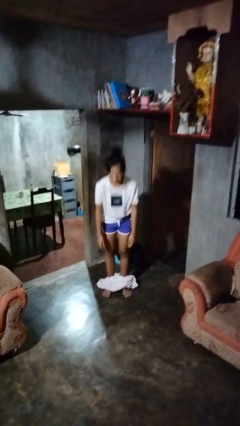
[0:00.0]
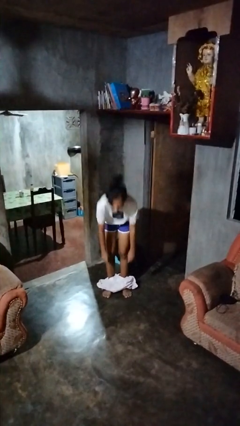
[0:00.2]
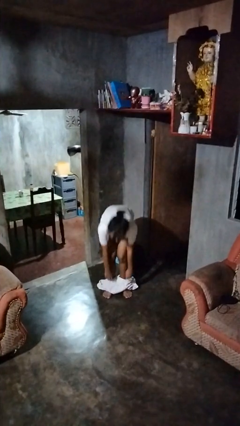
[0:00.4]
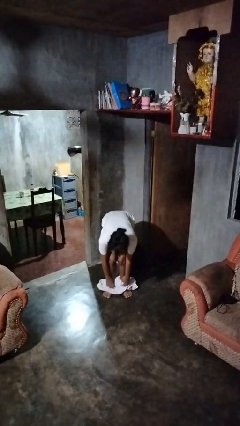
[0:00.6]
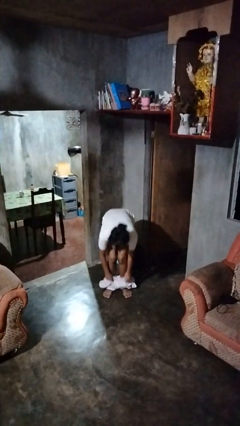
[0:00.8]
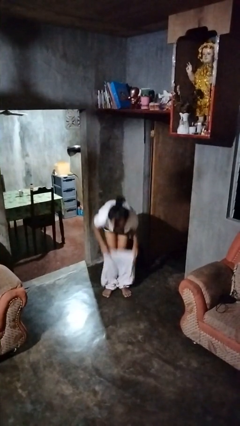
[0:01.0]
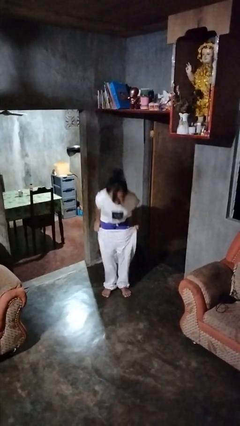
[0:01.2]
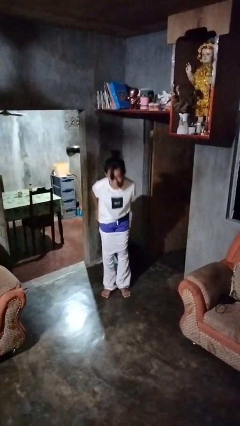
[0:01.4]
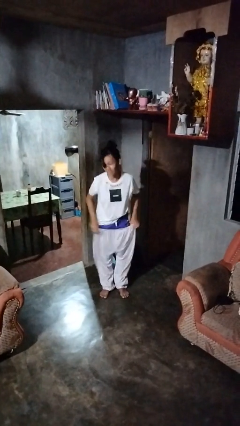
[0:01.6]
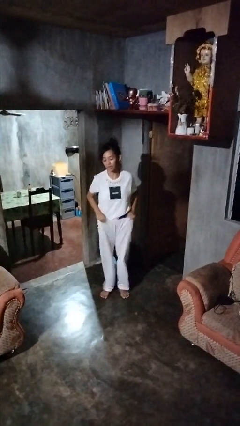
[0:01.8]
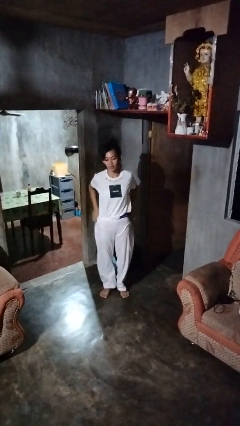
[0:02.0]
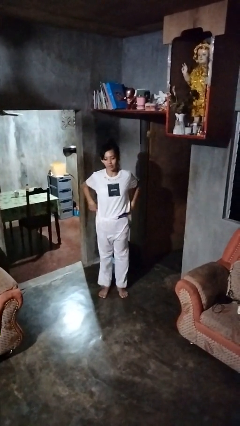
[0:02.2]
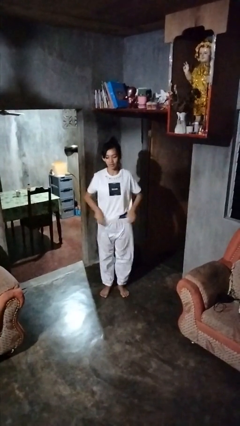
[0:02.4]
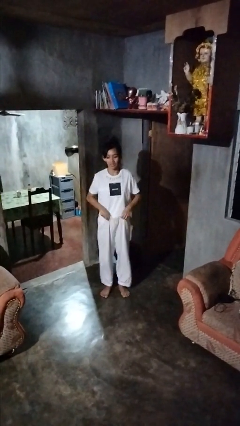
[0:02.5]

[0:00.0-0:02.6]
person puts on pants

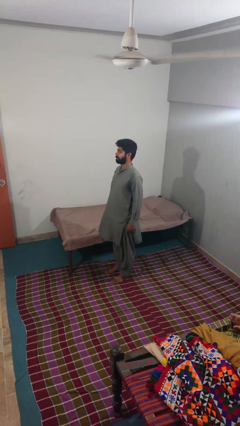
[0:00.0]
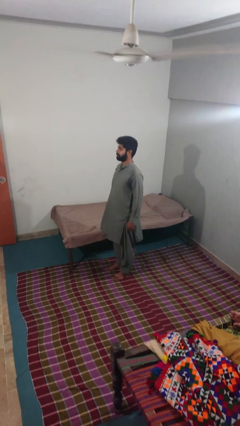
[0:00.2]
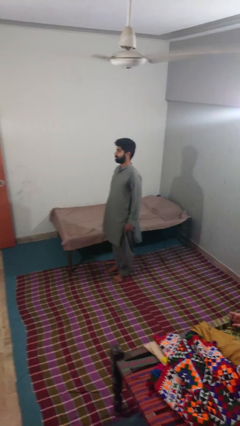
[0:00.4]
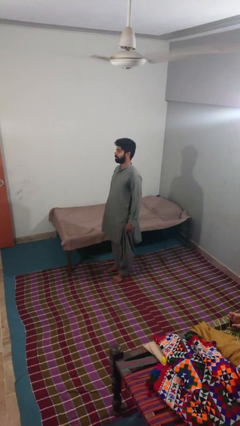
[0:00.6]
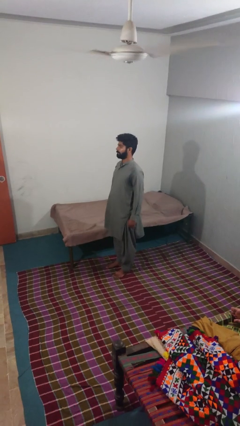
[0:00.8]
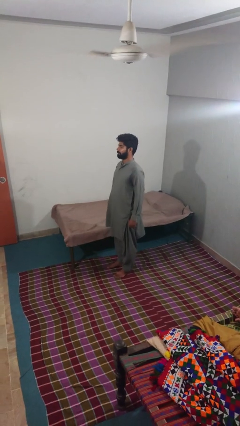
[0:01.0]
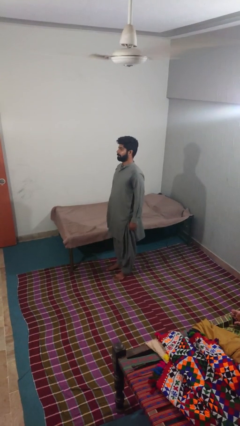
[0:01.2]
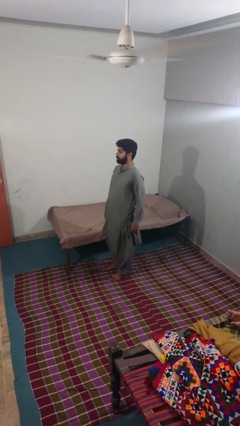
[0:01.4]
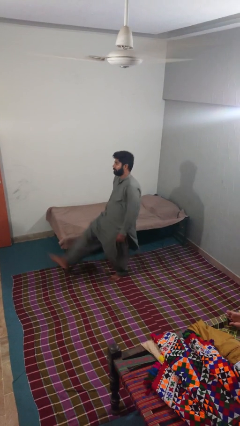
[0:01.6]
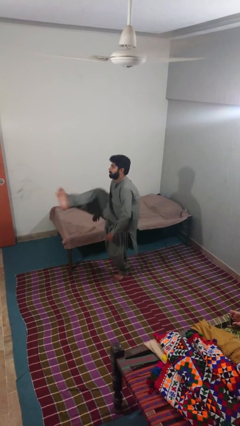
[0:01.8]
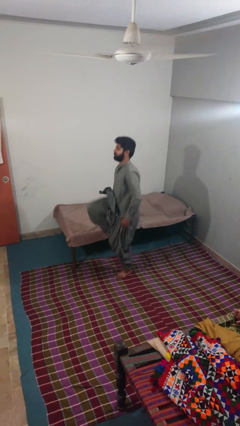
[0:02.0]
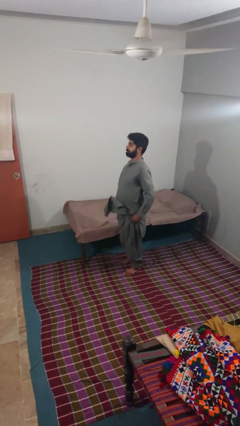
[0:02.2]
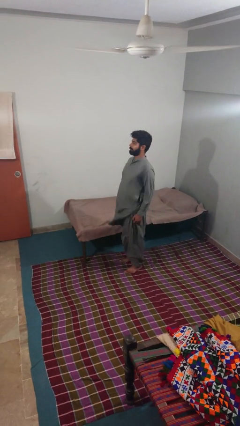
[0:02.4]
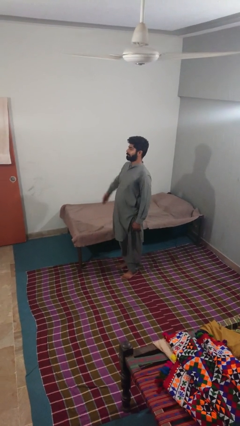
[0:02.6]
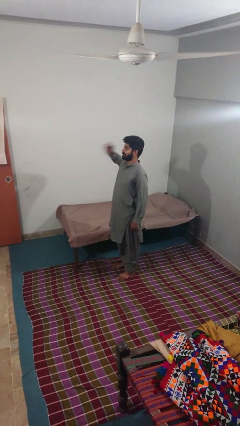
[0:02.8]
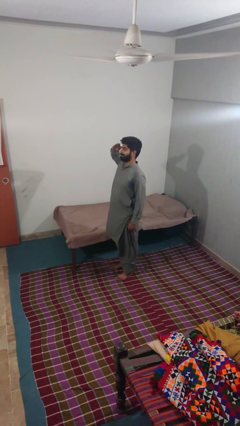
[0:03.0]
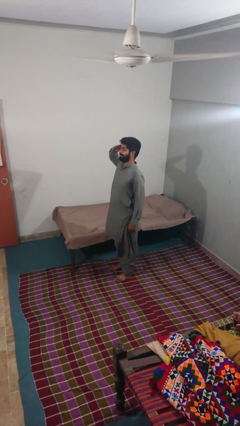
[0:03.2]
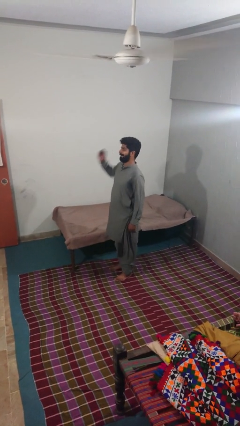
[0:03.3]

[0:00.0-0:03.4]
person salutes

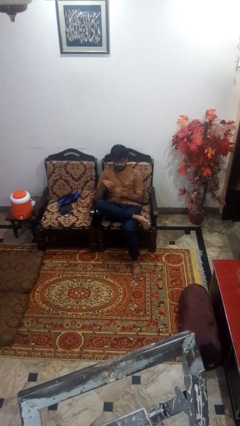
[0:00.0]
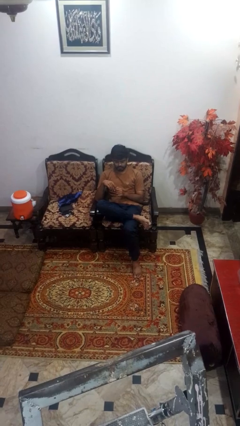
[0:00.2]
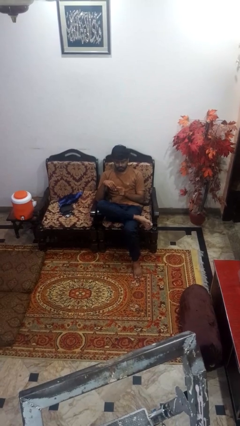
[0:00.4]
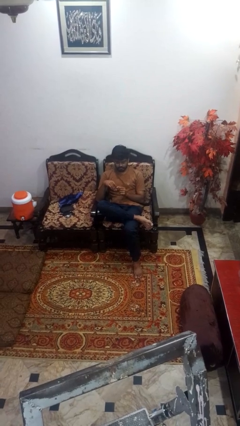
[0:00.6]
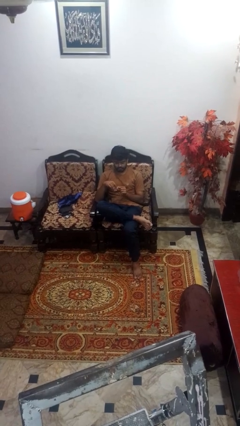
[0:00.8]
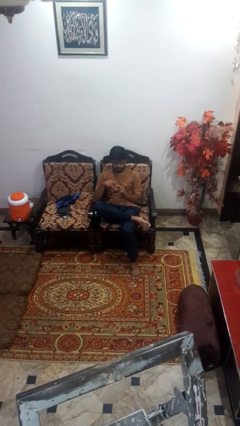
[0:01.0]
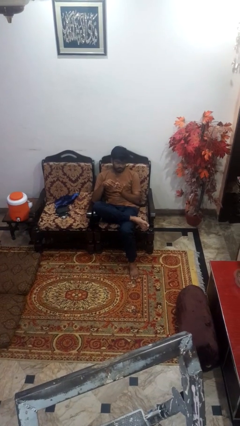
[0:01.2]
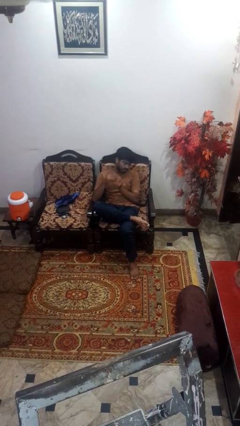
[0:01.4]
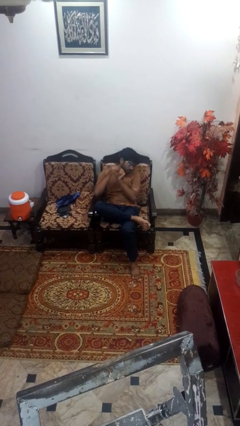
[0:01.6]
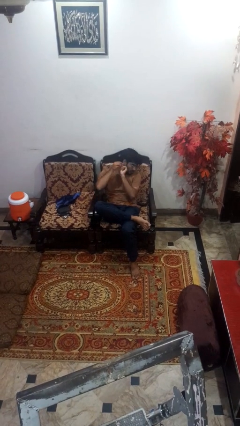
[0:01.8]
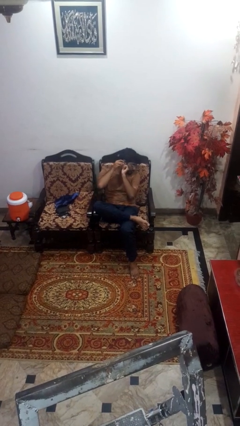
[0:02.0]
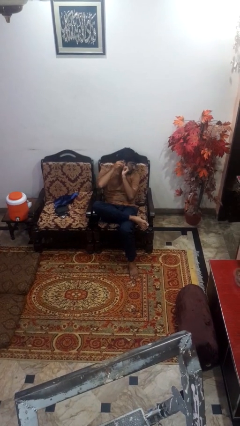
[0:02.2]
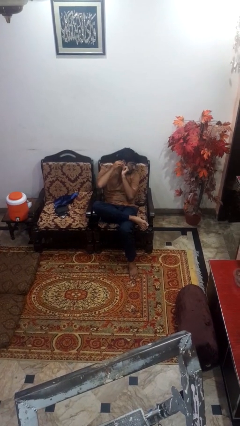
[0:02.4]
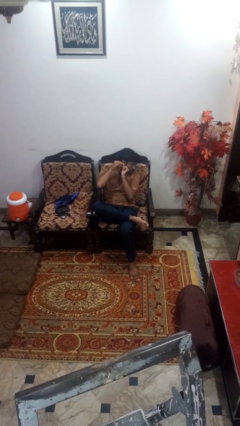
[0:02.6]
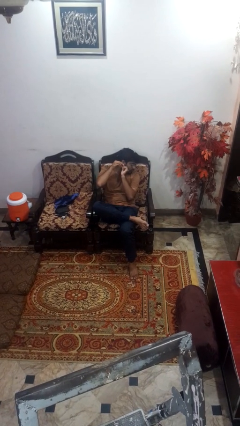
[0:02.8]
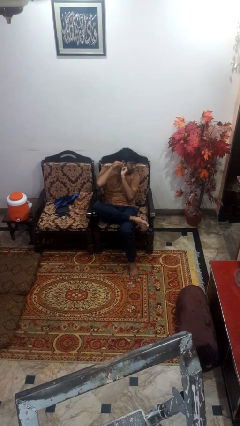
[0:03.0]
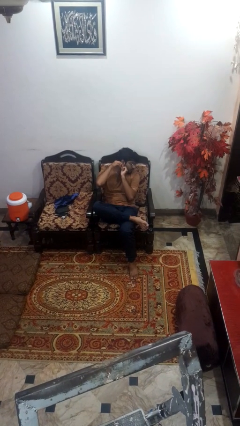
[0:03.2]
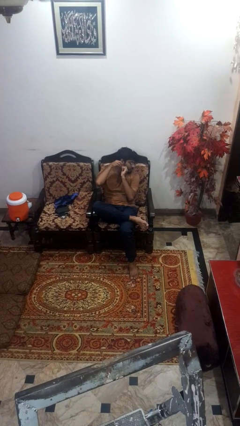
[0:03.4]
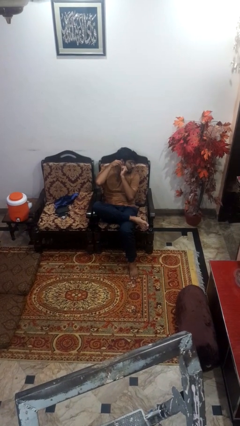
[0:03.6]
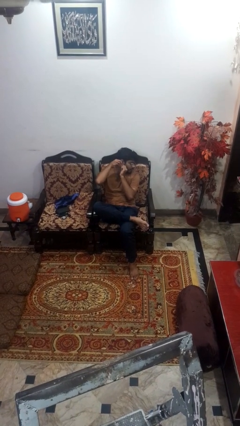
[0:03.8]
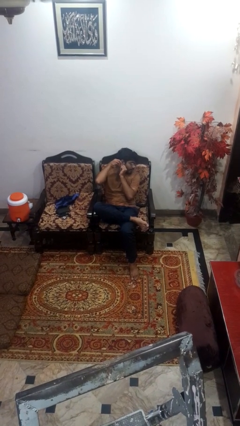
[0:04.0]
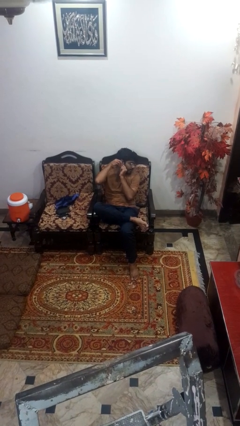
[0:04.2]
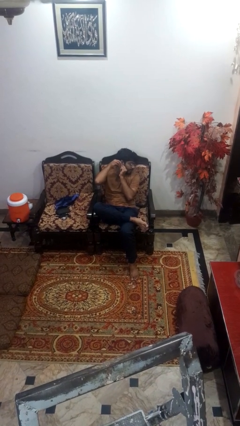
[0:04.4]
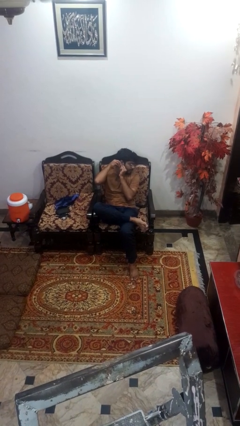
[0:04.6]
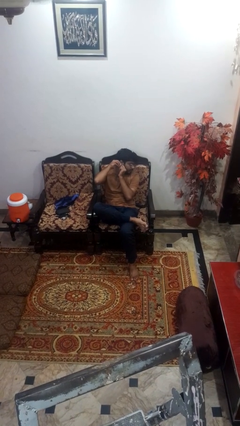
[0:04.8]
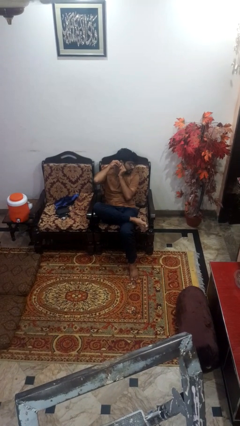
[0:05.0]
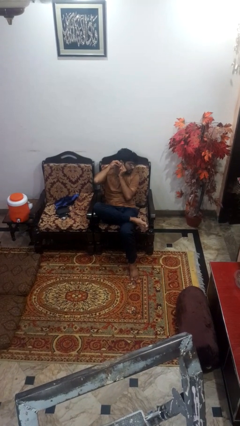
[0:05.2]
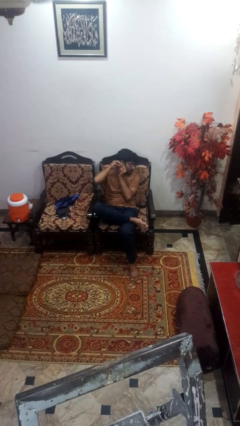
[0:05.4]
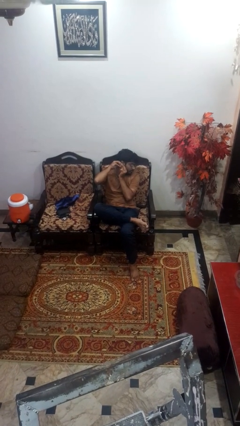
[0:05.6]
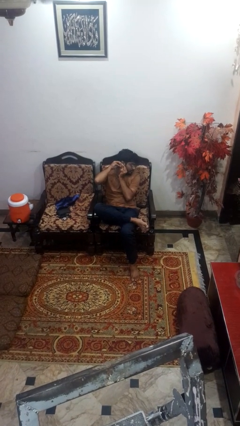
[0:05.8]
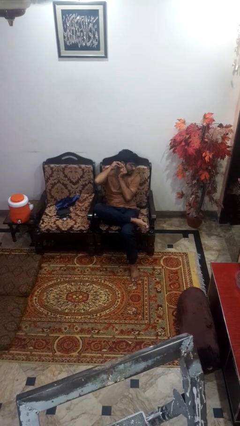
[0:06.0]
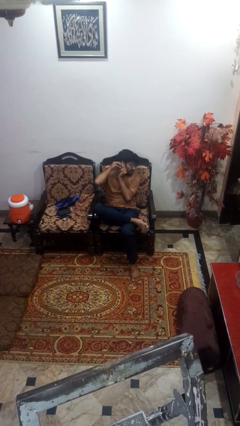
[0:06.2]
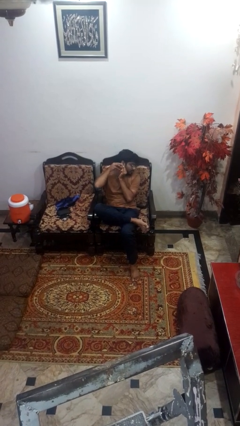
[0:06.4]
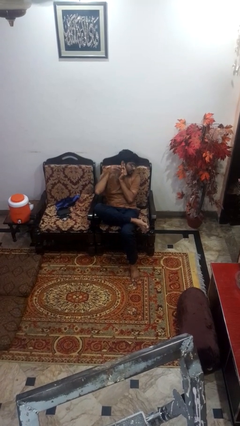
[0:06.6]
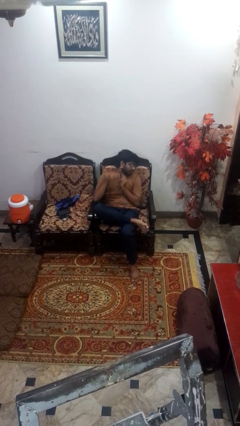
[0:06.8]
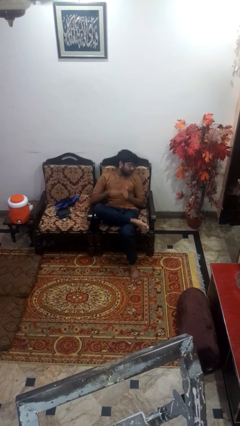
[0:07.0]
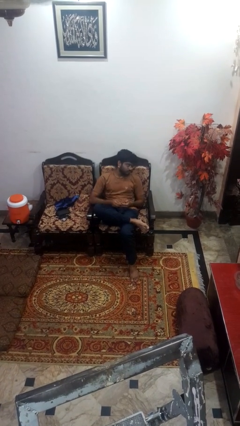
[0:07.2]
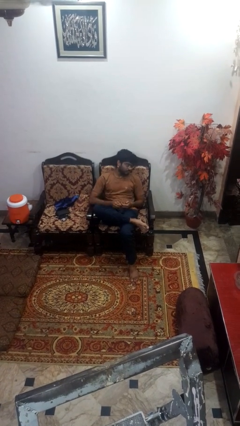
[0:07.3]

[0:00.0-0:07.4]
person puts on earrings

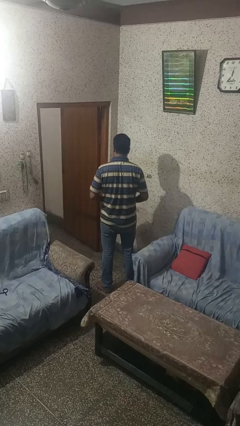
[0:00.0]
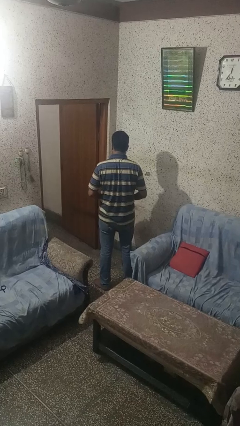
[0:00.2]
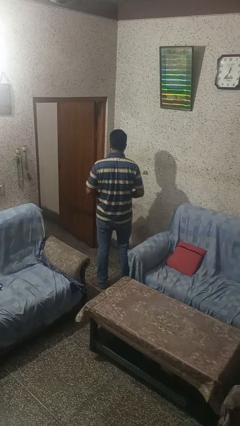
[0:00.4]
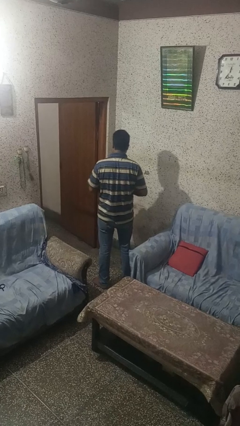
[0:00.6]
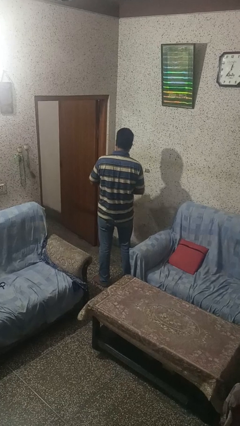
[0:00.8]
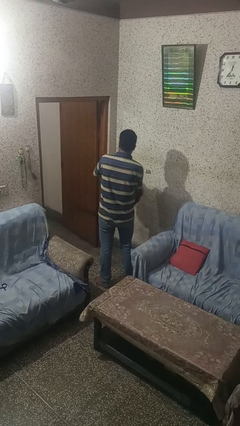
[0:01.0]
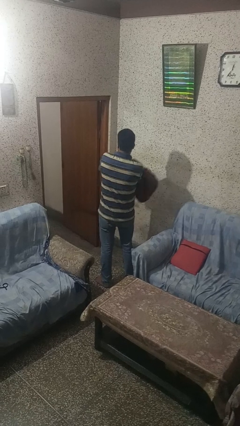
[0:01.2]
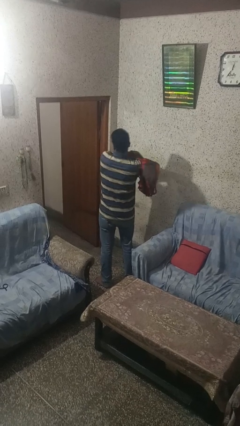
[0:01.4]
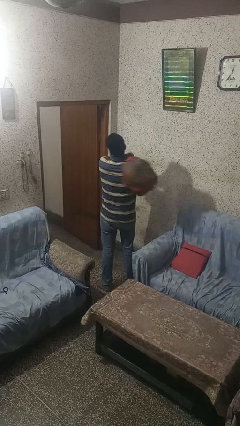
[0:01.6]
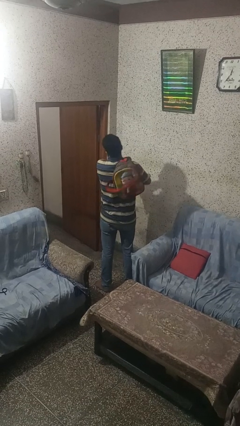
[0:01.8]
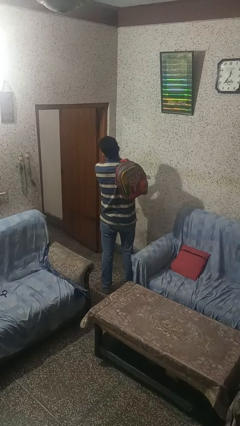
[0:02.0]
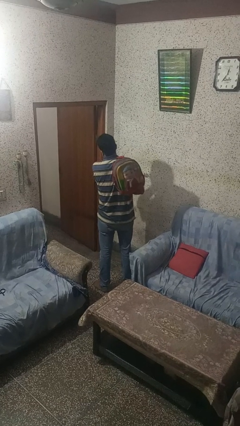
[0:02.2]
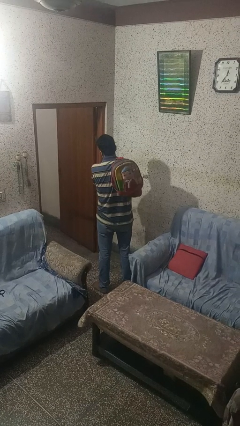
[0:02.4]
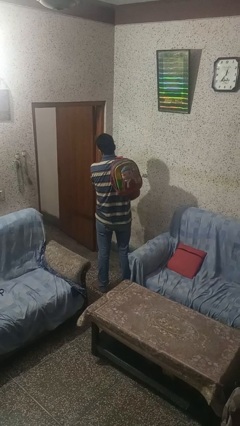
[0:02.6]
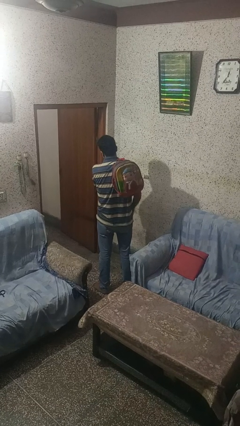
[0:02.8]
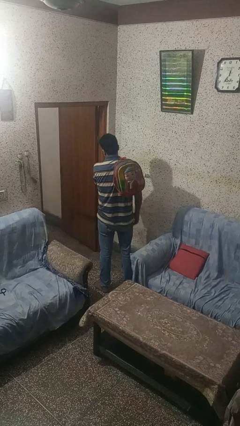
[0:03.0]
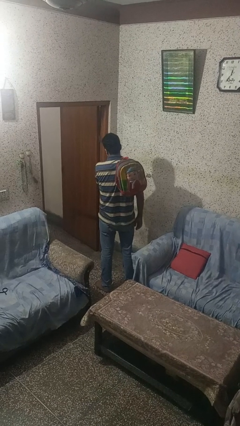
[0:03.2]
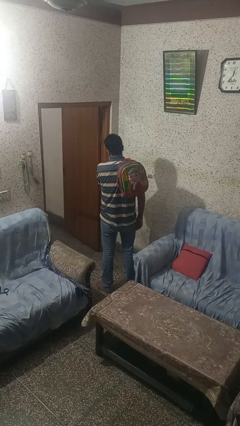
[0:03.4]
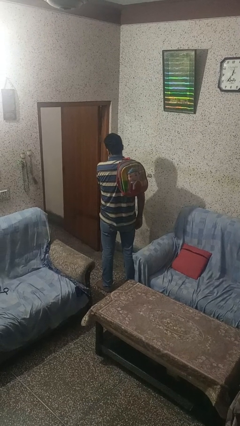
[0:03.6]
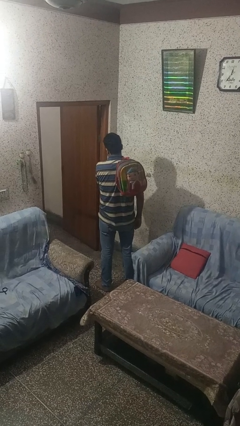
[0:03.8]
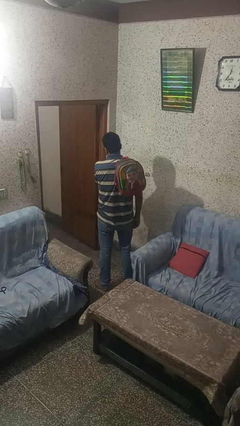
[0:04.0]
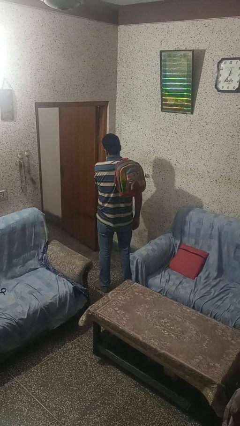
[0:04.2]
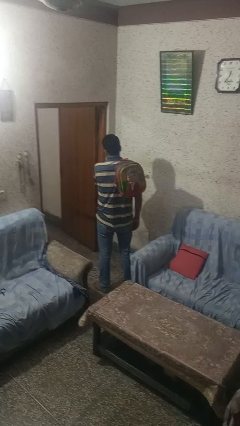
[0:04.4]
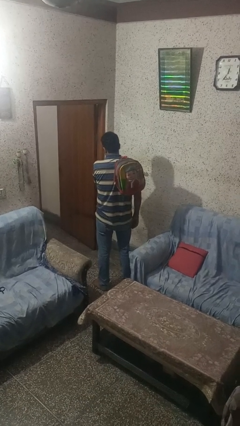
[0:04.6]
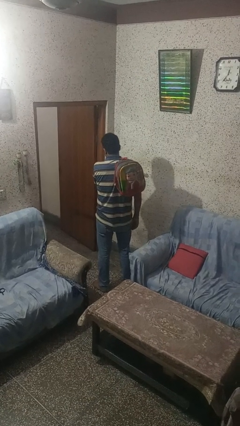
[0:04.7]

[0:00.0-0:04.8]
person puts on backpack
